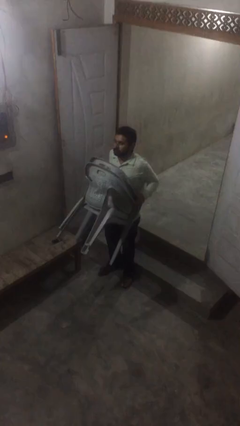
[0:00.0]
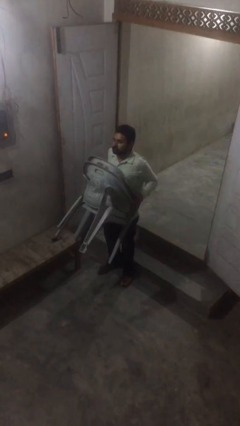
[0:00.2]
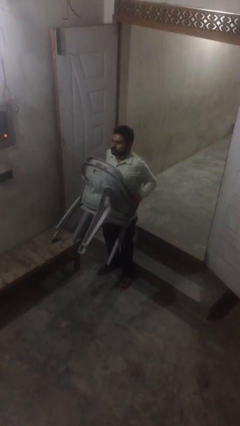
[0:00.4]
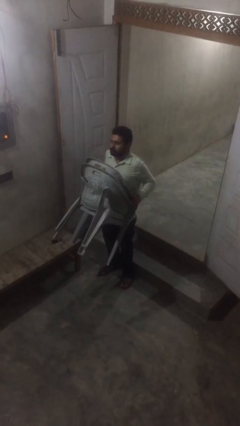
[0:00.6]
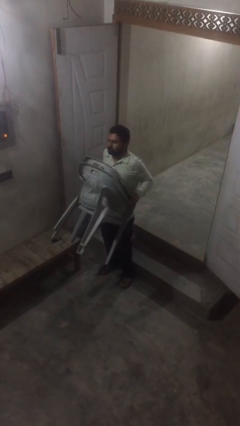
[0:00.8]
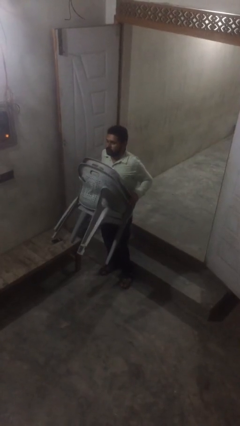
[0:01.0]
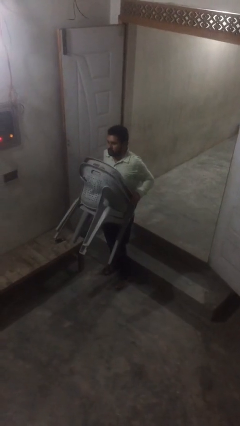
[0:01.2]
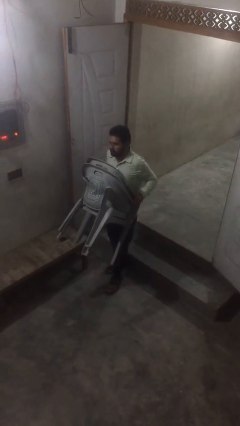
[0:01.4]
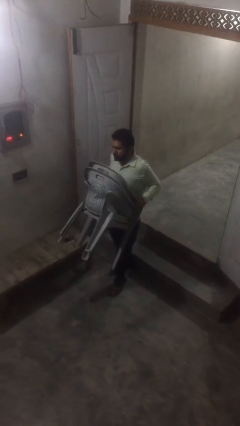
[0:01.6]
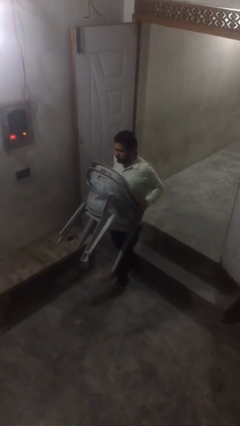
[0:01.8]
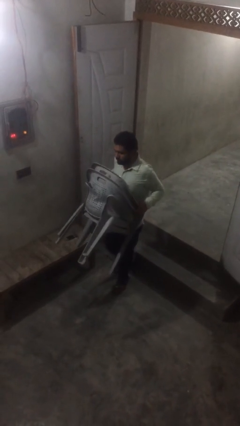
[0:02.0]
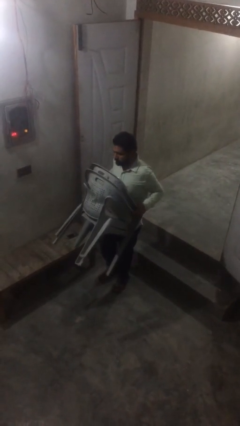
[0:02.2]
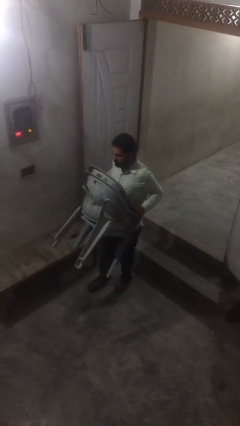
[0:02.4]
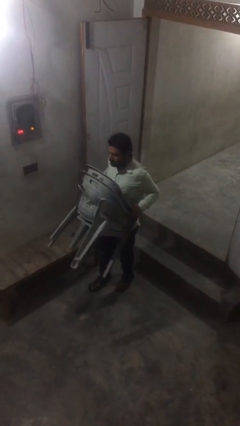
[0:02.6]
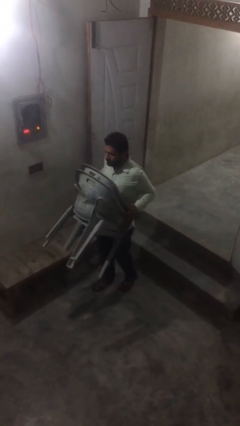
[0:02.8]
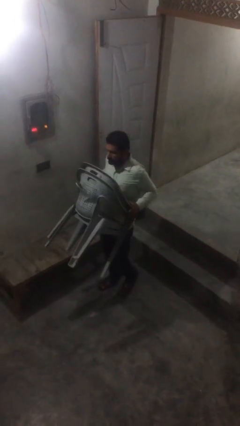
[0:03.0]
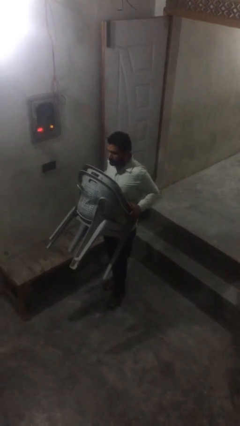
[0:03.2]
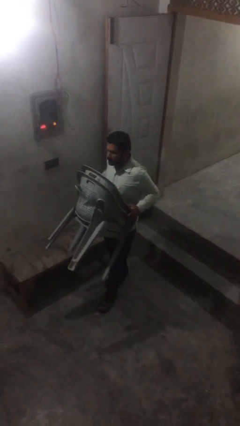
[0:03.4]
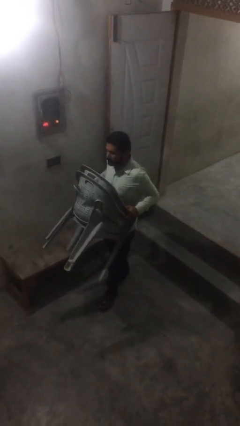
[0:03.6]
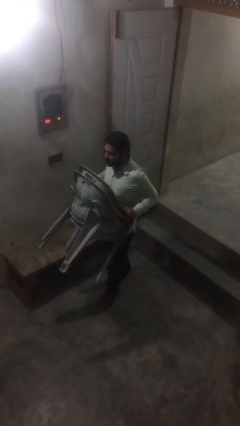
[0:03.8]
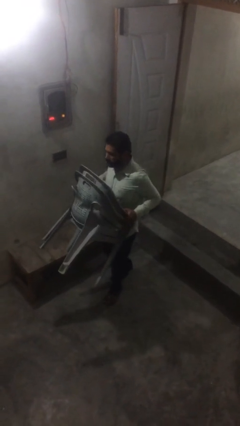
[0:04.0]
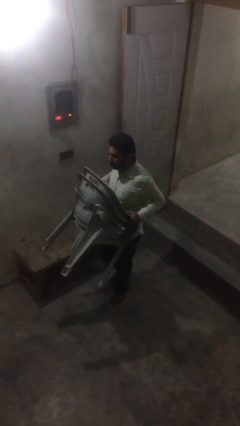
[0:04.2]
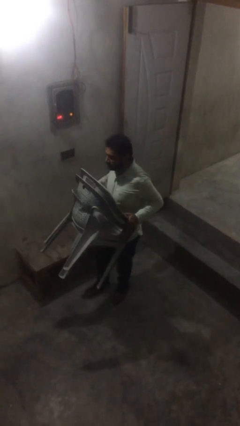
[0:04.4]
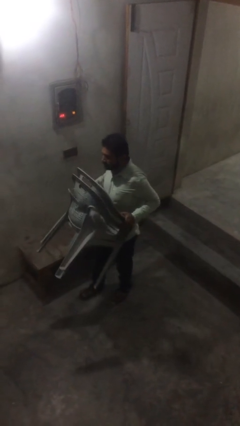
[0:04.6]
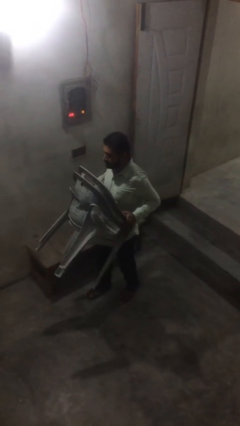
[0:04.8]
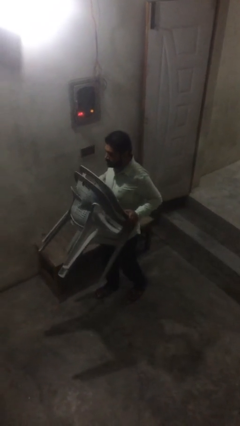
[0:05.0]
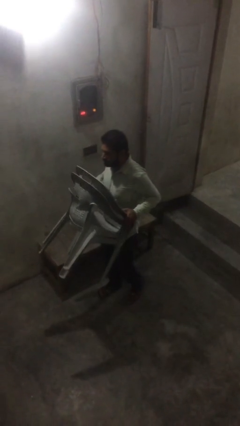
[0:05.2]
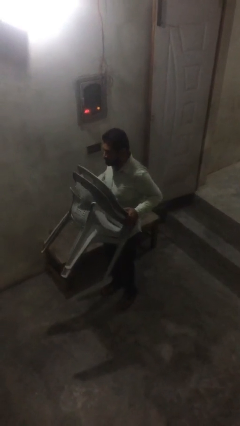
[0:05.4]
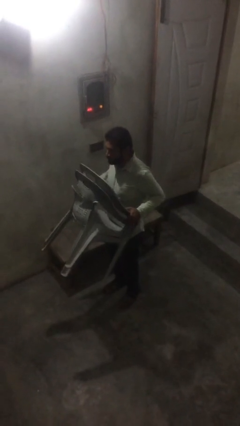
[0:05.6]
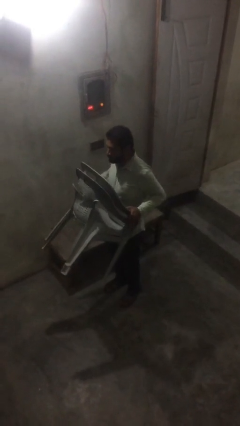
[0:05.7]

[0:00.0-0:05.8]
person carries heavy object

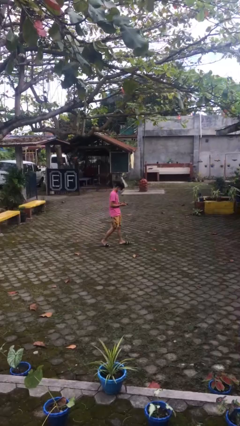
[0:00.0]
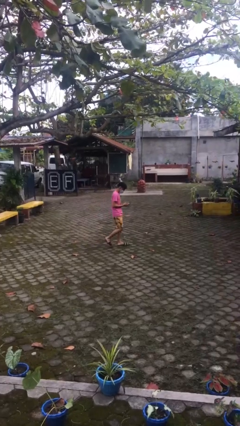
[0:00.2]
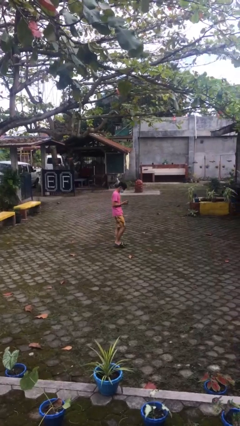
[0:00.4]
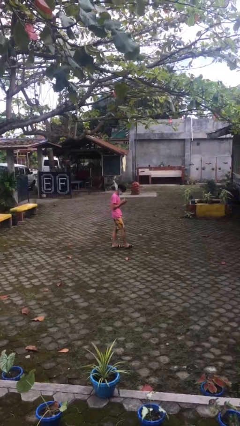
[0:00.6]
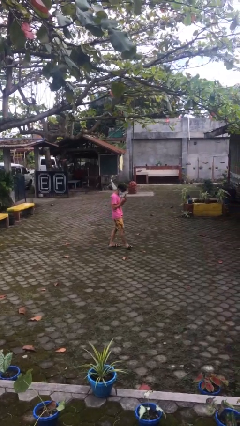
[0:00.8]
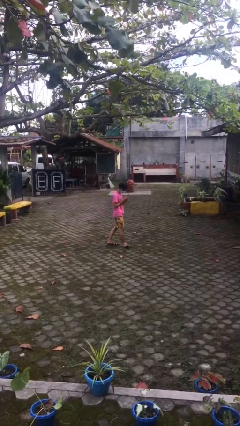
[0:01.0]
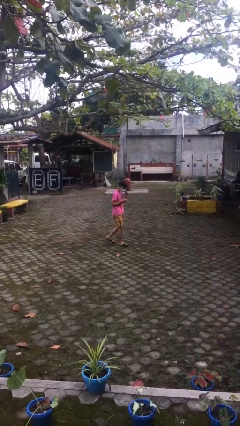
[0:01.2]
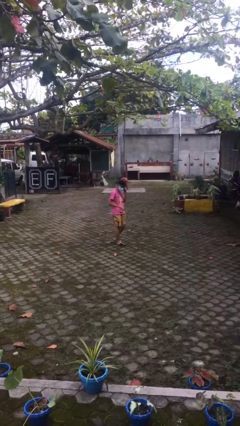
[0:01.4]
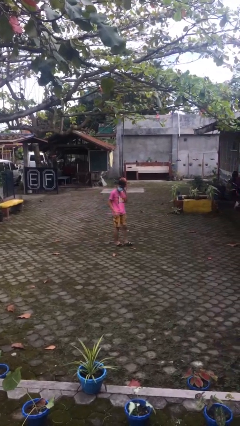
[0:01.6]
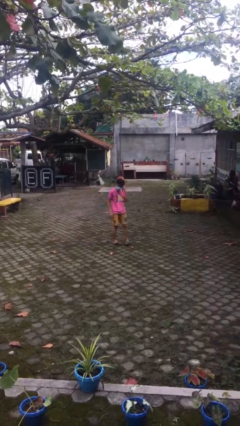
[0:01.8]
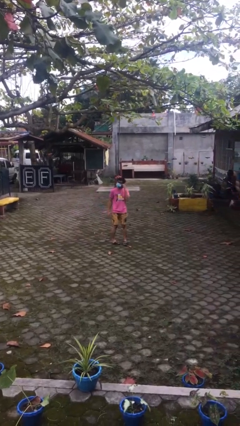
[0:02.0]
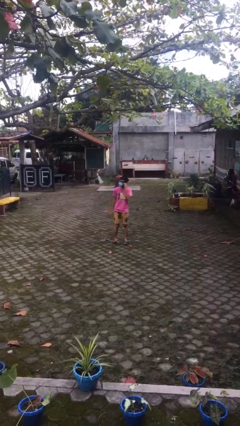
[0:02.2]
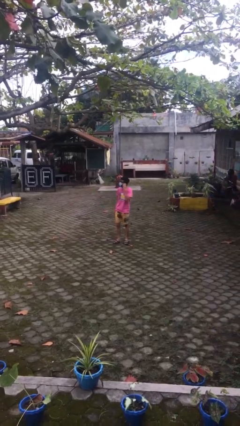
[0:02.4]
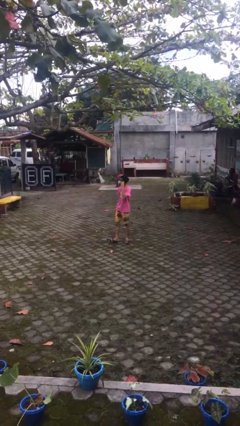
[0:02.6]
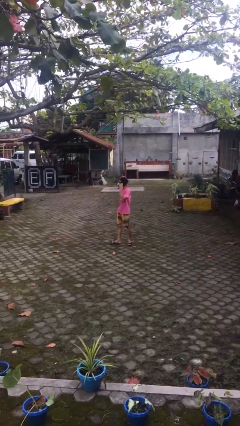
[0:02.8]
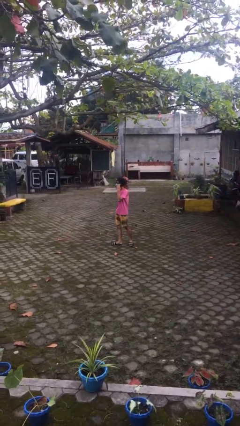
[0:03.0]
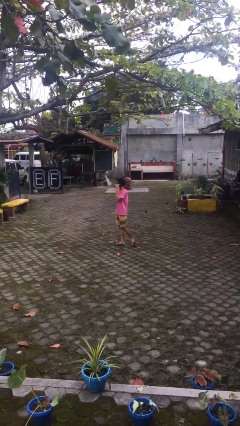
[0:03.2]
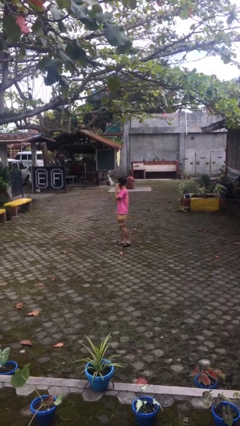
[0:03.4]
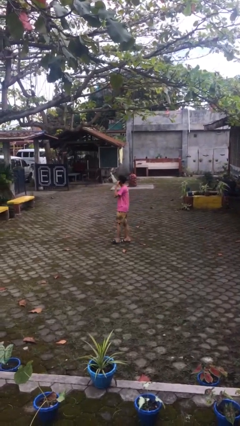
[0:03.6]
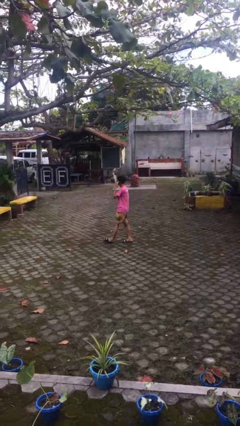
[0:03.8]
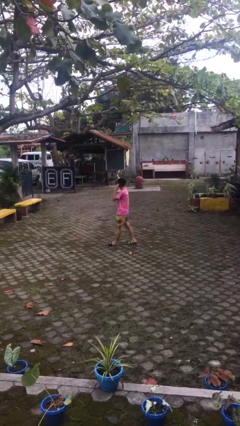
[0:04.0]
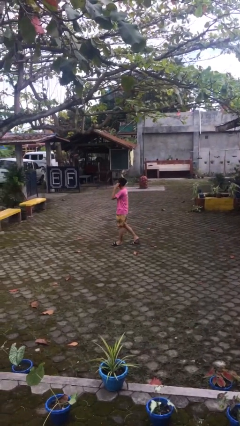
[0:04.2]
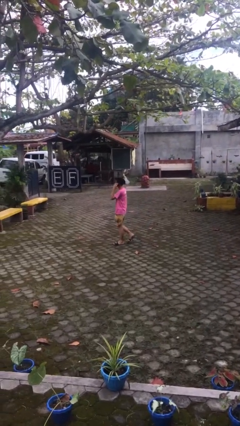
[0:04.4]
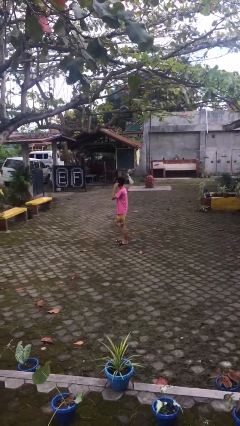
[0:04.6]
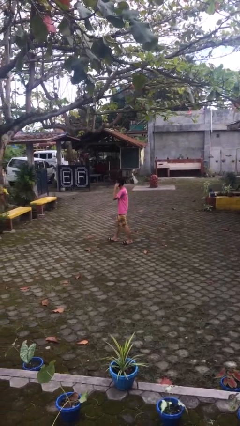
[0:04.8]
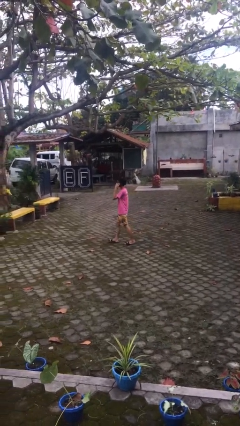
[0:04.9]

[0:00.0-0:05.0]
person talks on phone

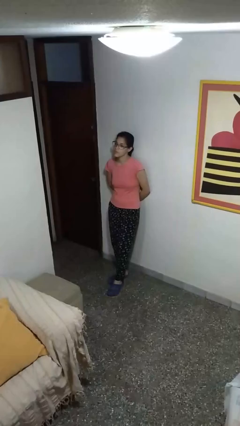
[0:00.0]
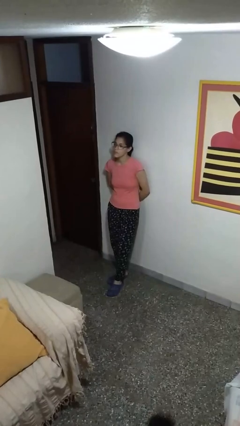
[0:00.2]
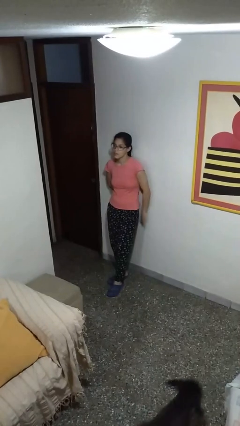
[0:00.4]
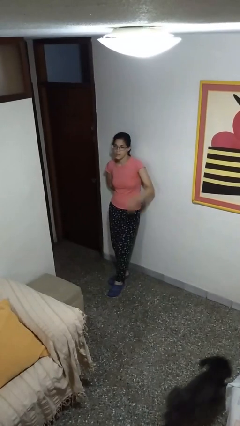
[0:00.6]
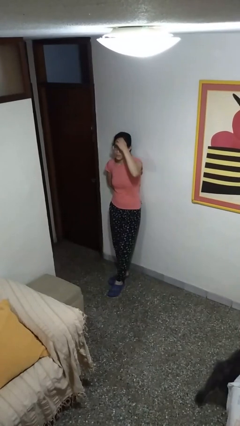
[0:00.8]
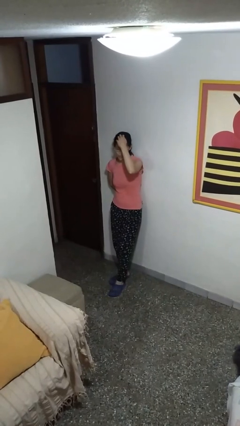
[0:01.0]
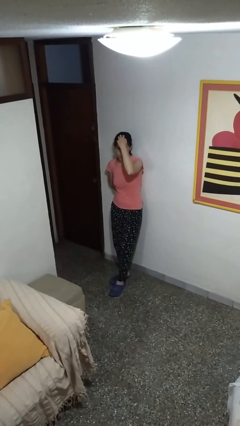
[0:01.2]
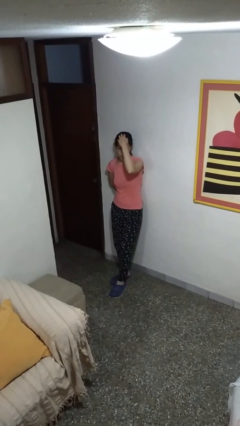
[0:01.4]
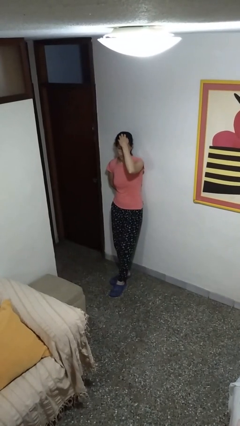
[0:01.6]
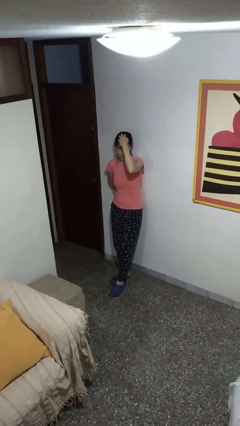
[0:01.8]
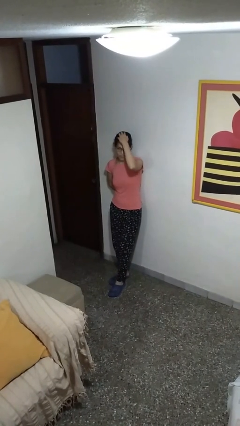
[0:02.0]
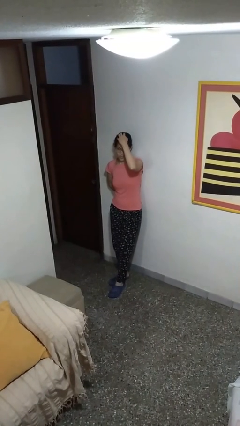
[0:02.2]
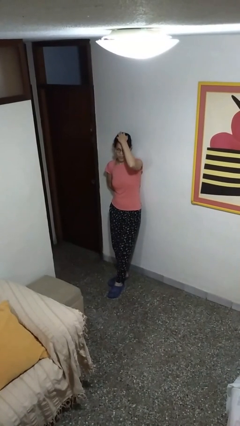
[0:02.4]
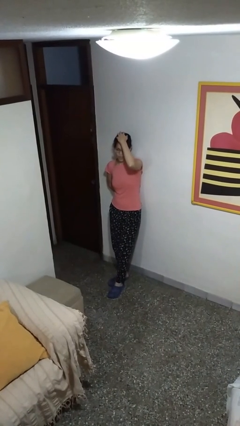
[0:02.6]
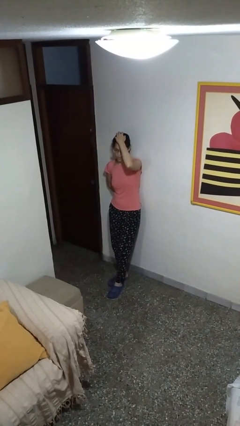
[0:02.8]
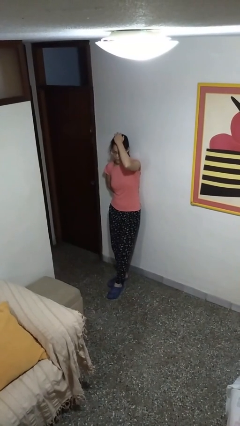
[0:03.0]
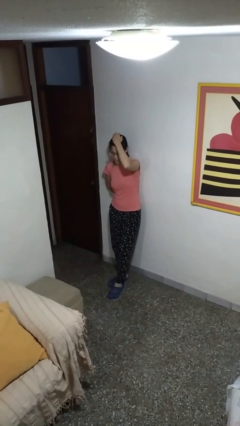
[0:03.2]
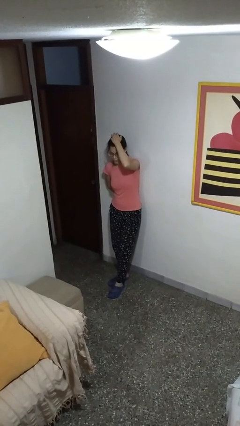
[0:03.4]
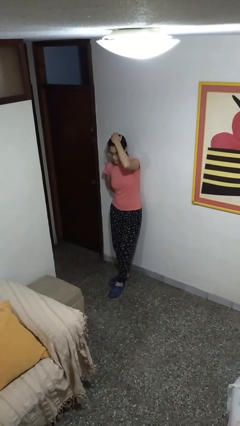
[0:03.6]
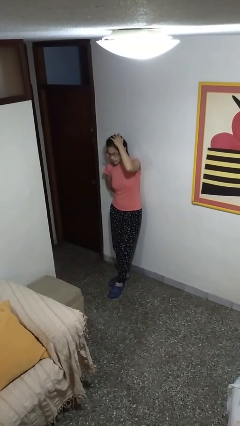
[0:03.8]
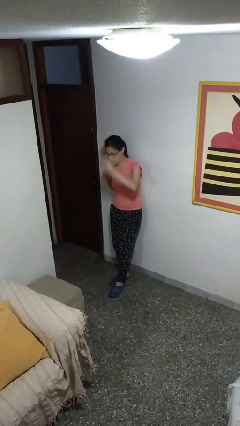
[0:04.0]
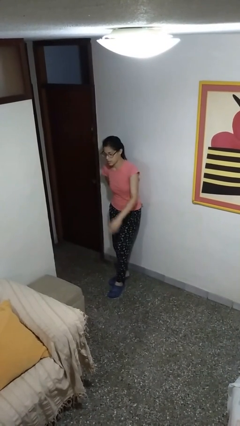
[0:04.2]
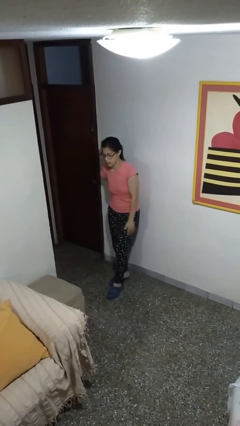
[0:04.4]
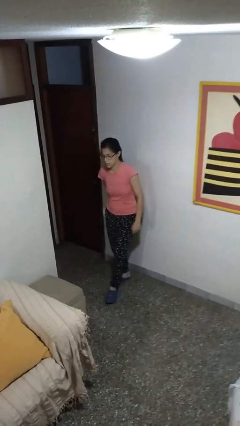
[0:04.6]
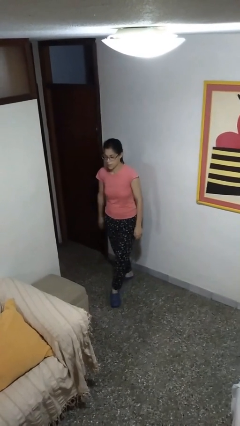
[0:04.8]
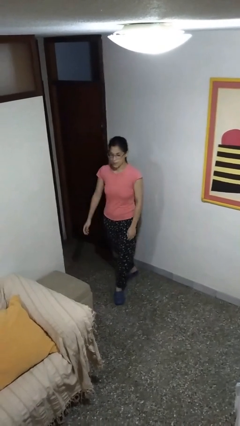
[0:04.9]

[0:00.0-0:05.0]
person scratches face

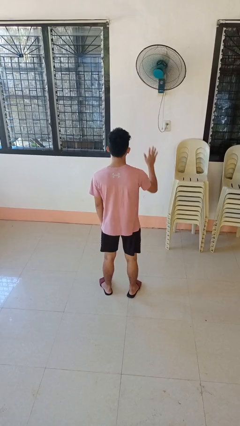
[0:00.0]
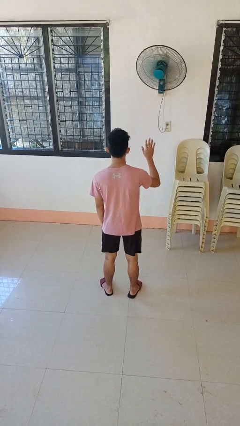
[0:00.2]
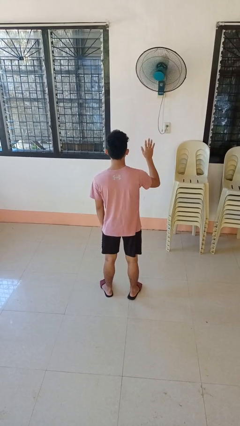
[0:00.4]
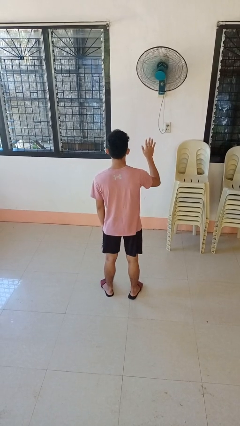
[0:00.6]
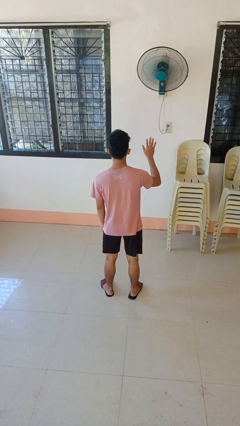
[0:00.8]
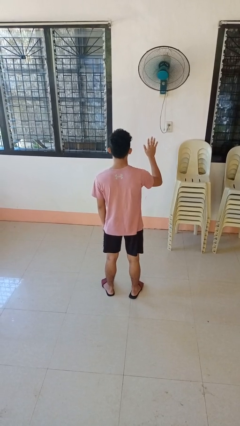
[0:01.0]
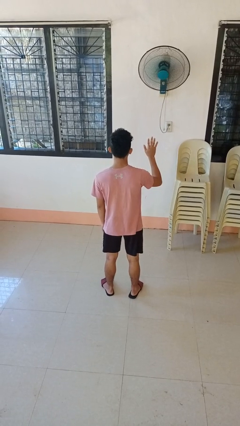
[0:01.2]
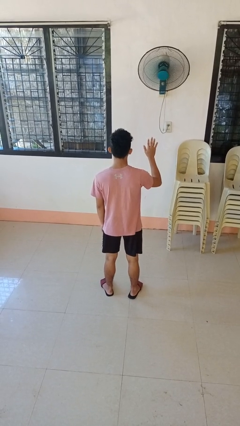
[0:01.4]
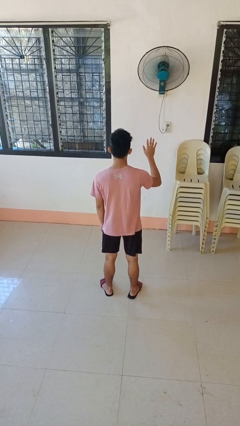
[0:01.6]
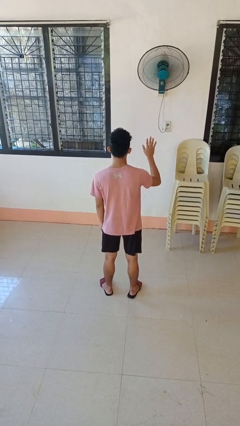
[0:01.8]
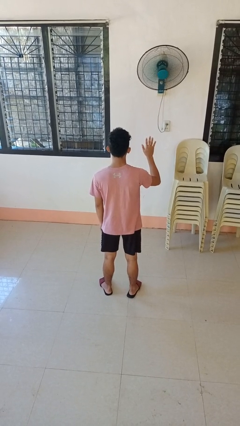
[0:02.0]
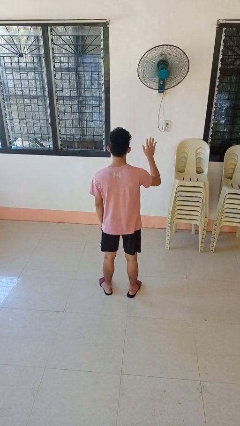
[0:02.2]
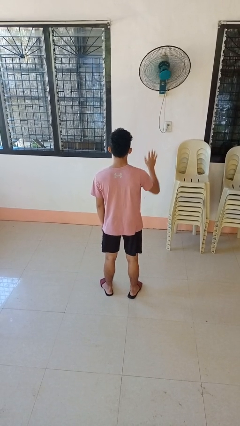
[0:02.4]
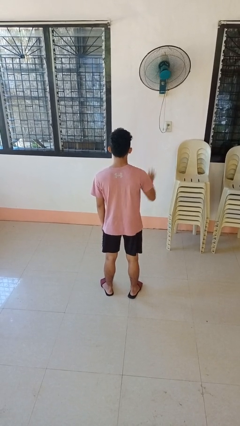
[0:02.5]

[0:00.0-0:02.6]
person gestures number five
